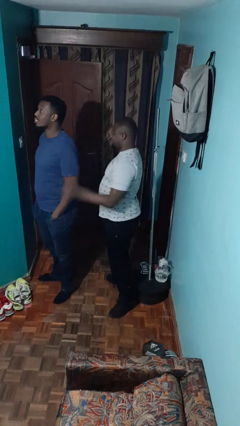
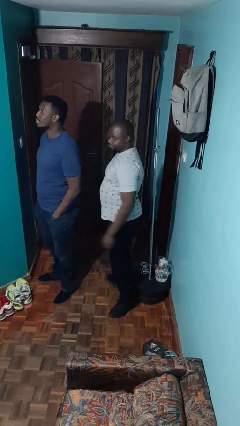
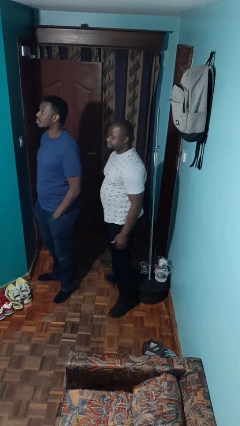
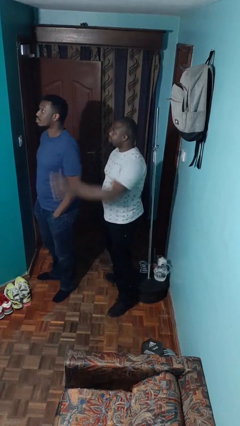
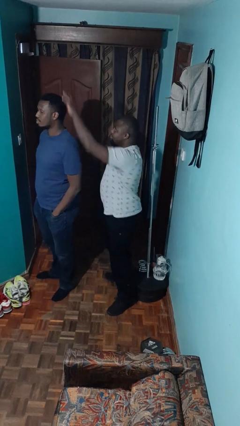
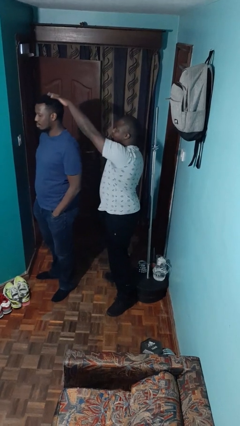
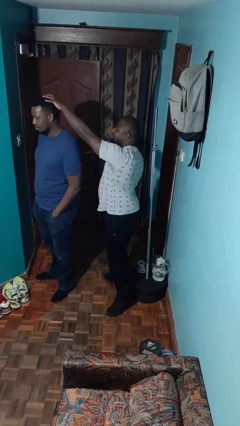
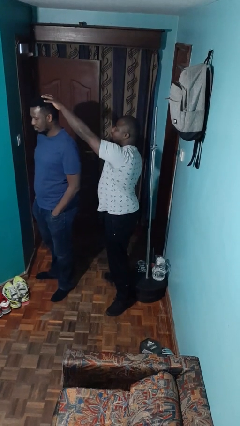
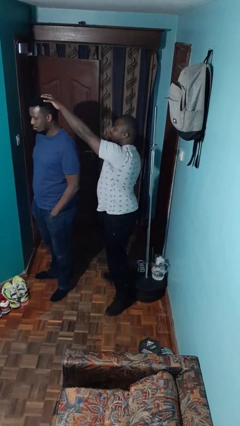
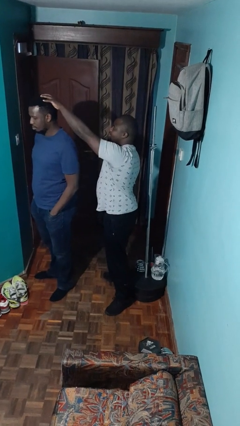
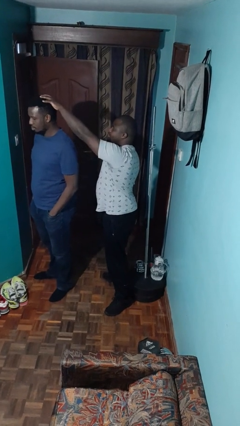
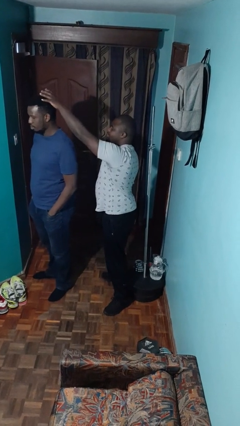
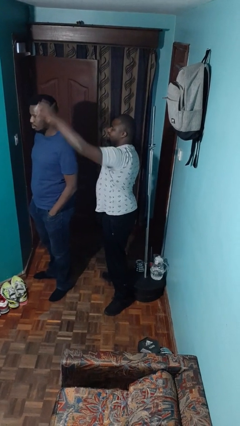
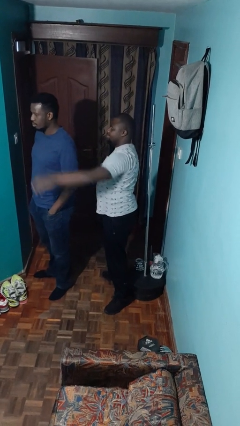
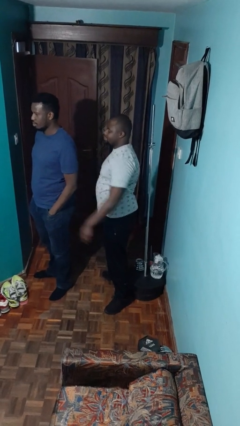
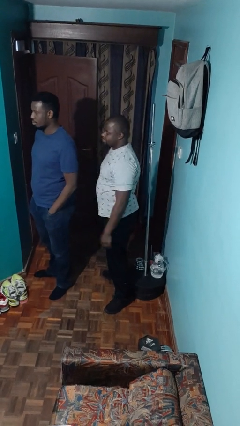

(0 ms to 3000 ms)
person grabs person by hair

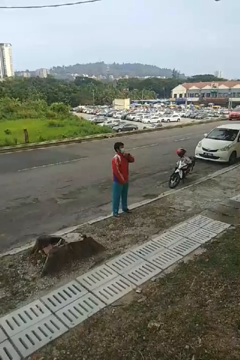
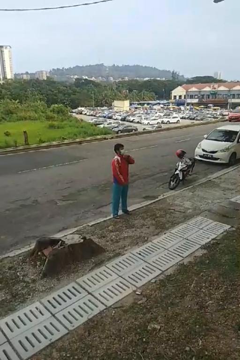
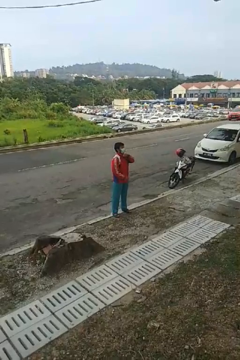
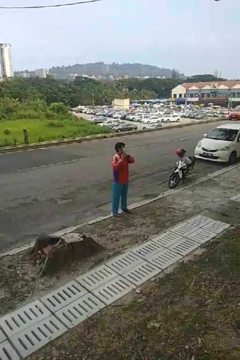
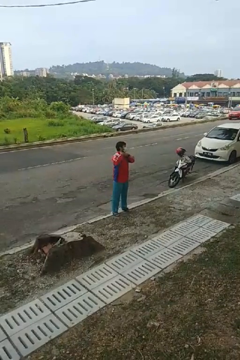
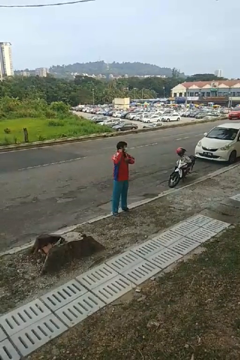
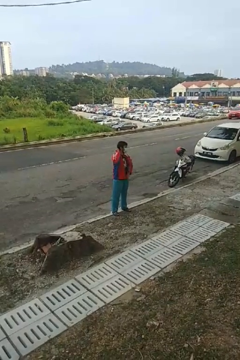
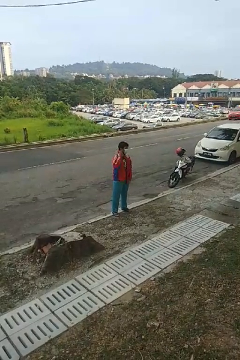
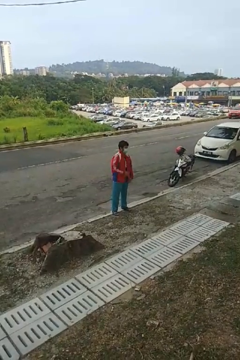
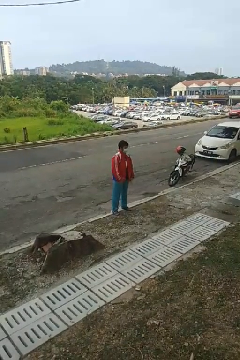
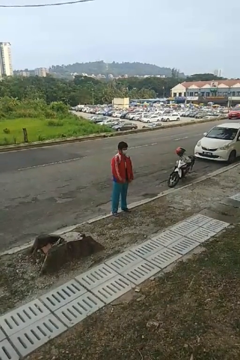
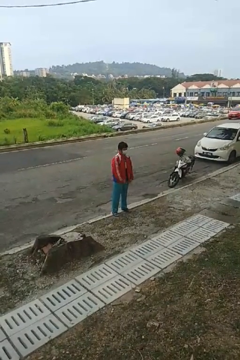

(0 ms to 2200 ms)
person unzips jacket

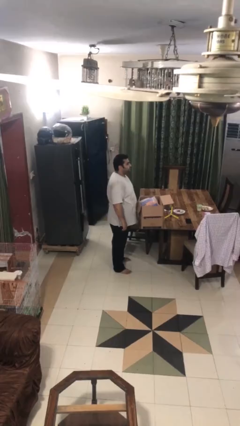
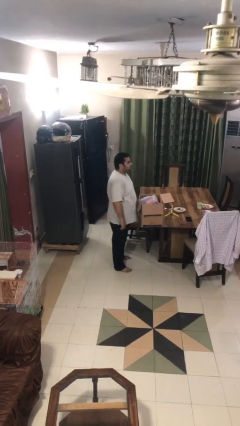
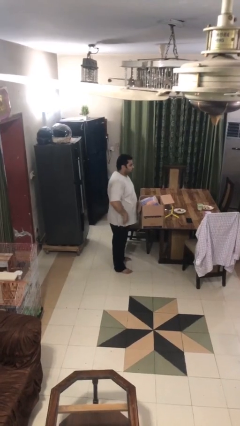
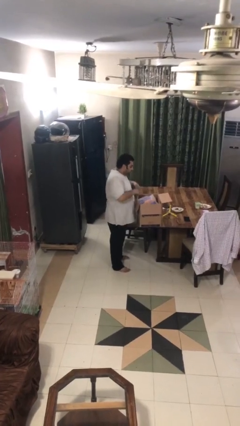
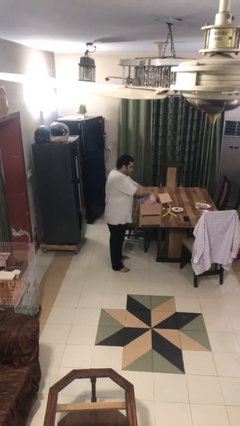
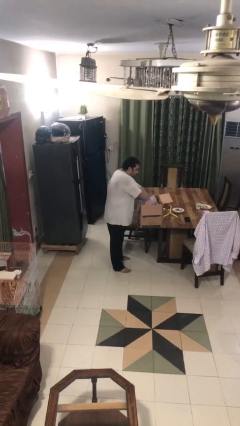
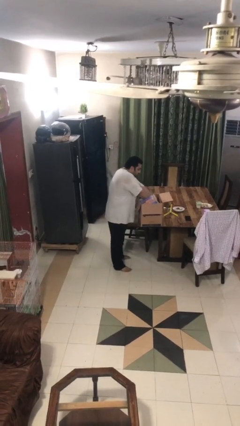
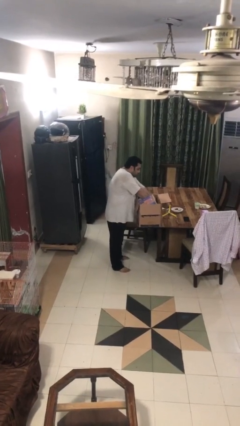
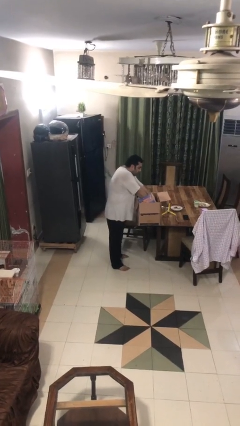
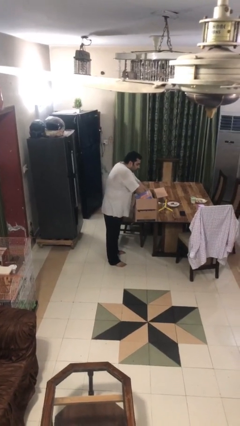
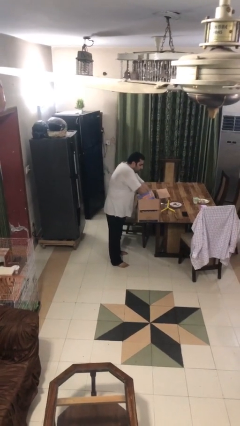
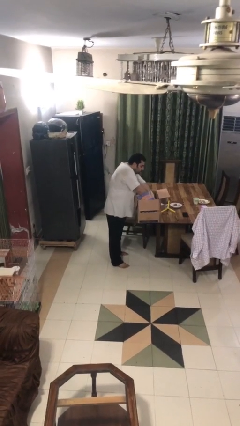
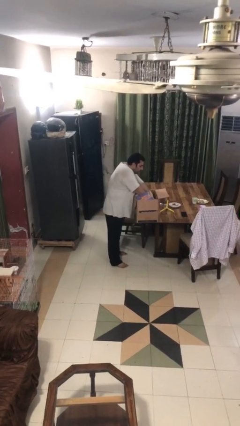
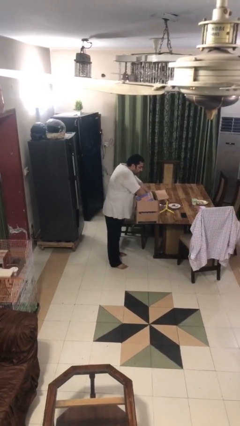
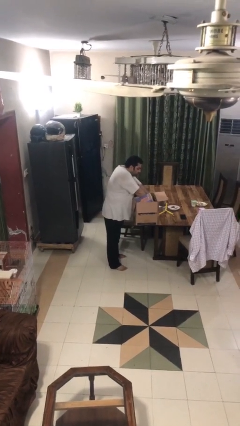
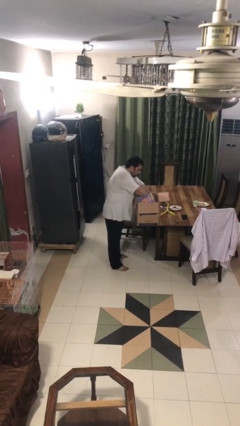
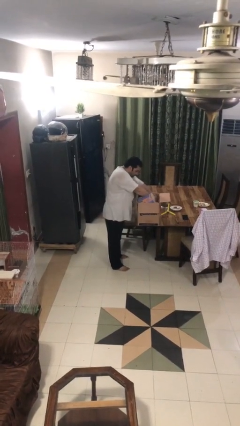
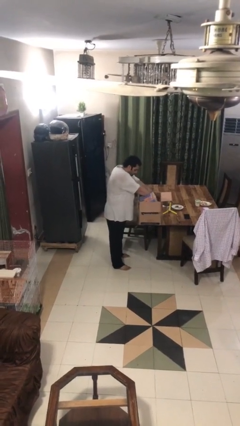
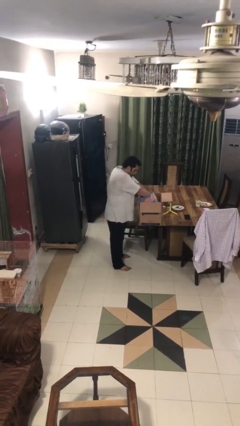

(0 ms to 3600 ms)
person searches in box

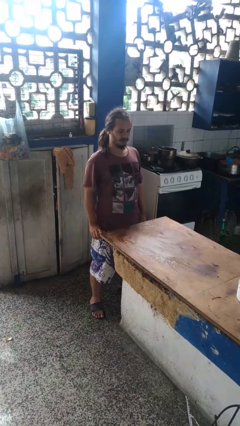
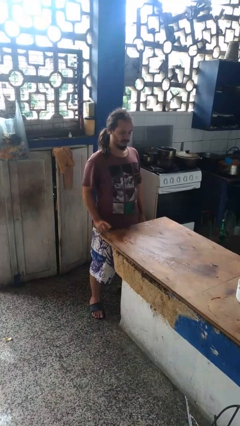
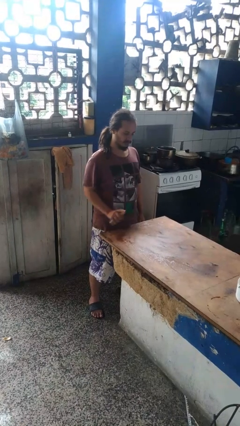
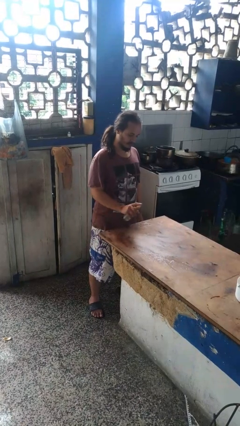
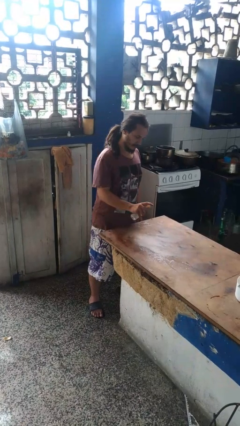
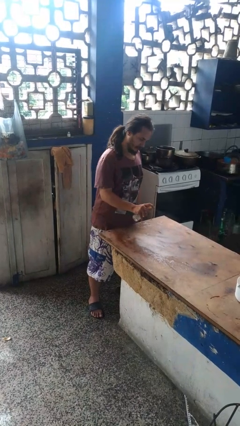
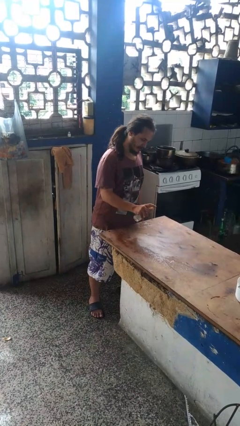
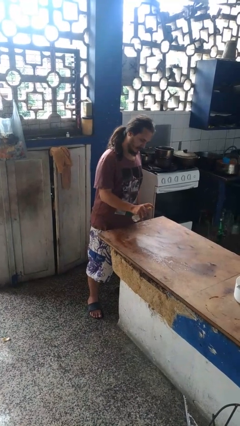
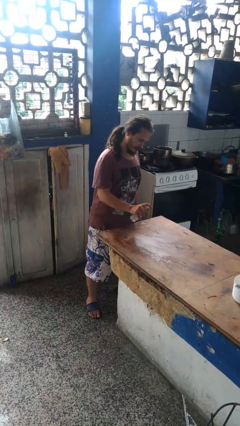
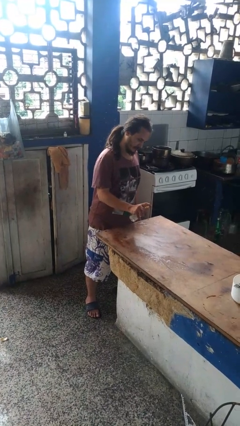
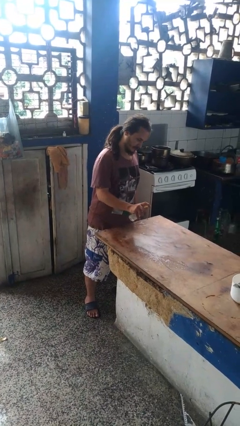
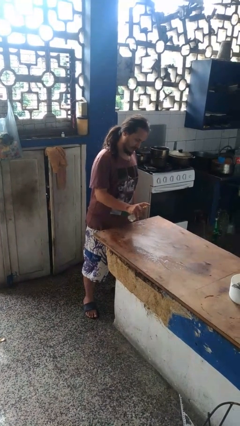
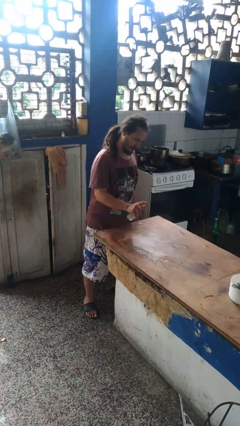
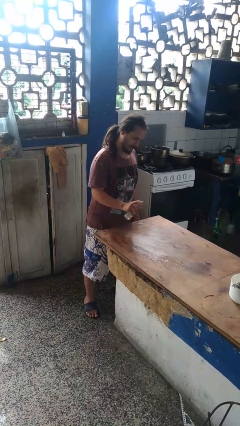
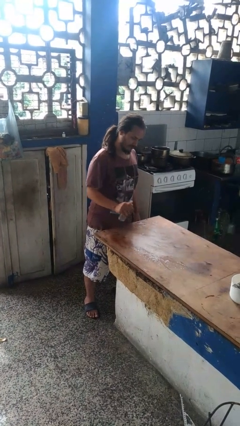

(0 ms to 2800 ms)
person sprays from bottle

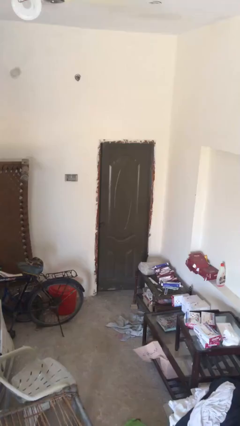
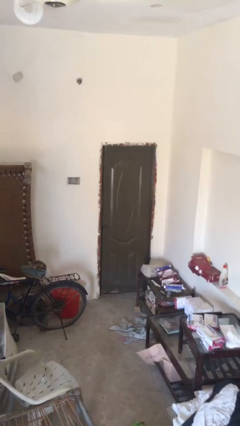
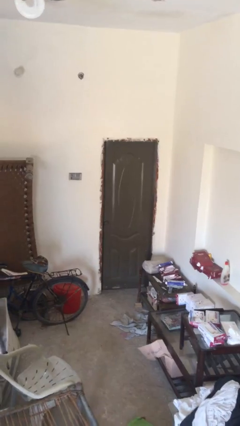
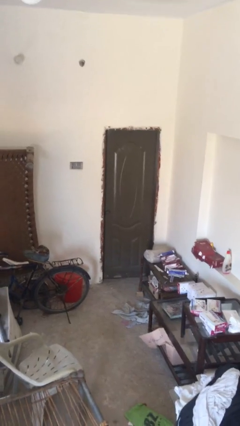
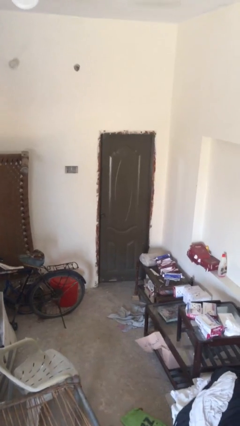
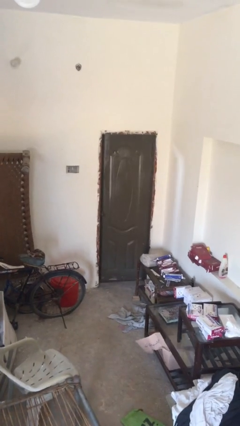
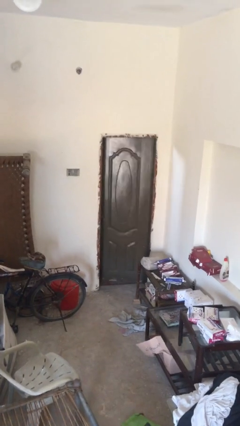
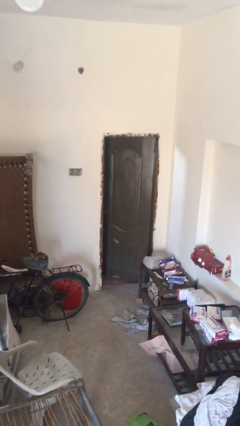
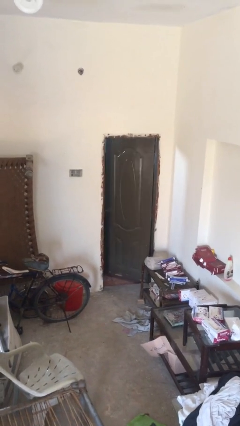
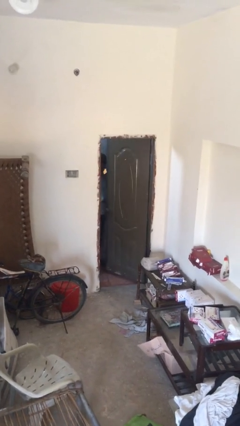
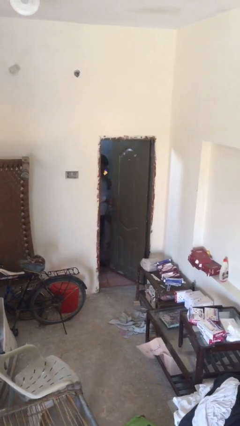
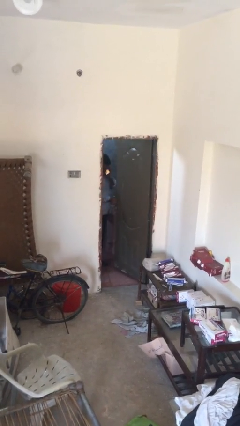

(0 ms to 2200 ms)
person opens facility door

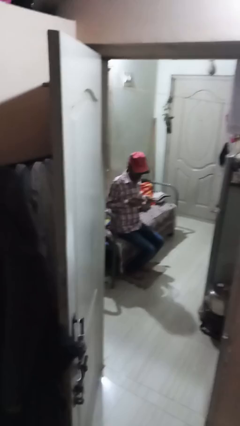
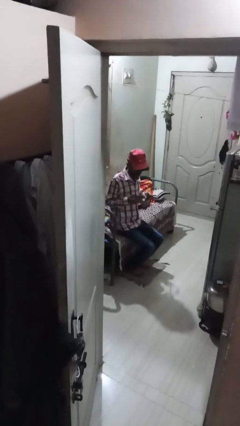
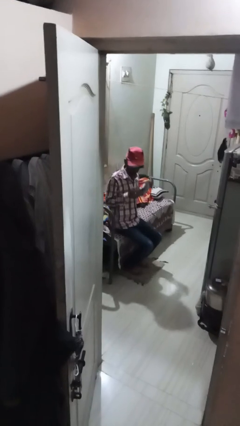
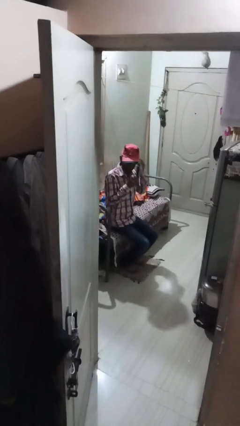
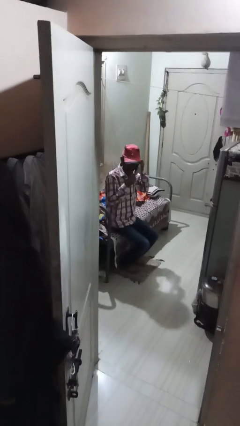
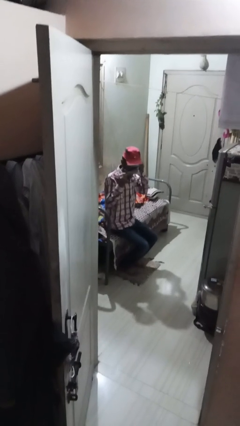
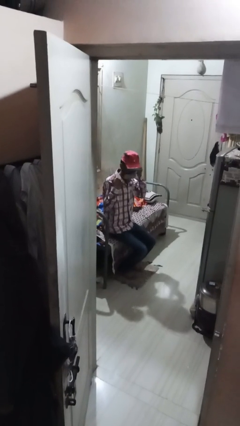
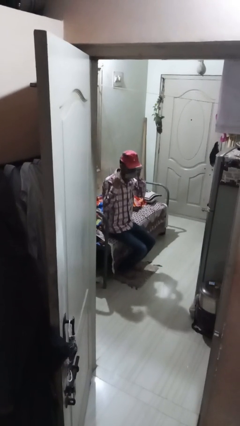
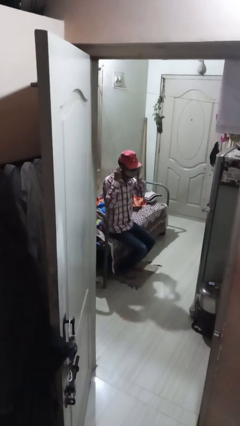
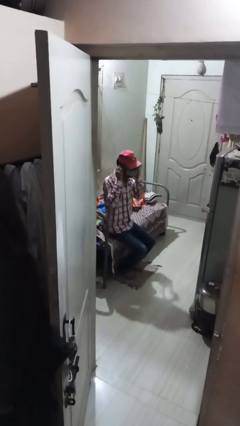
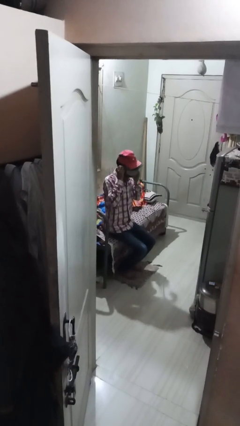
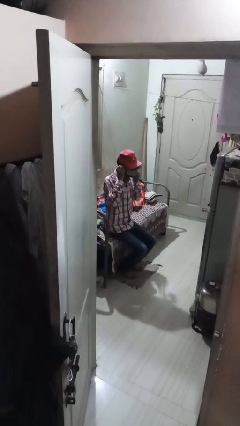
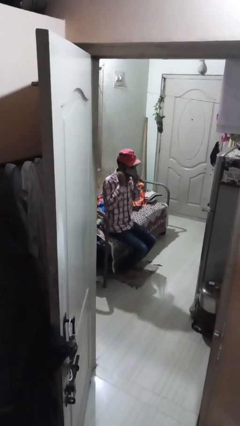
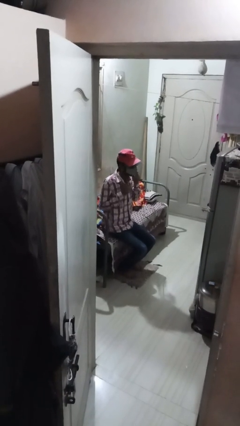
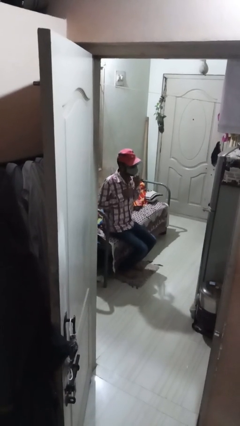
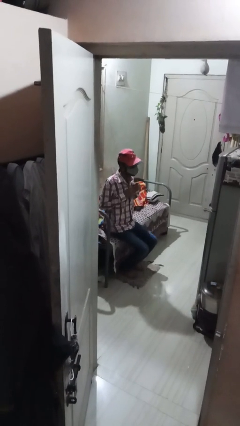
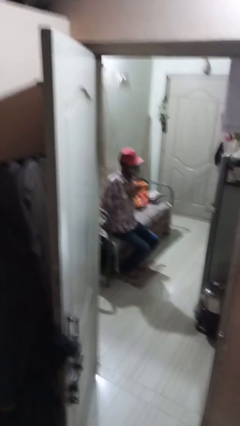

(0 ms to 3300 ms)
person puts on facemask

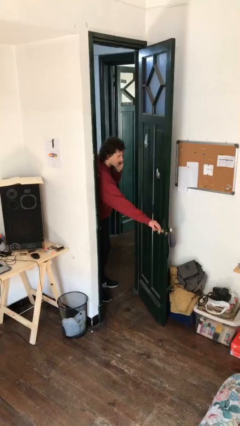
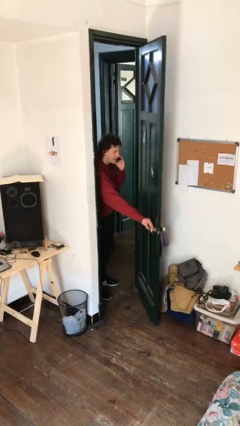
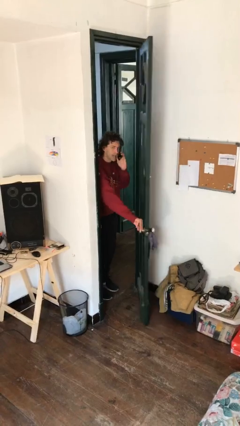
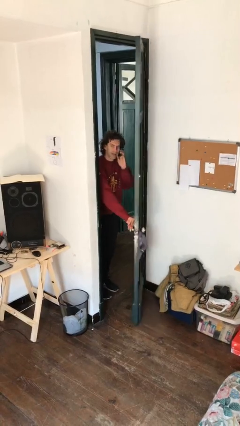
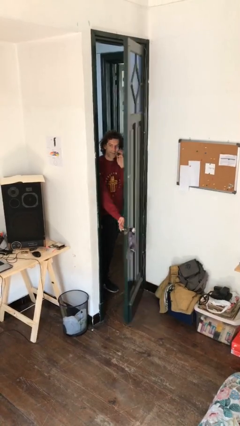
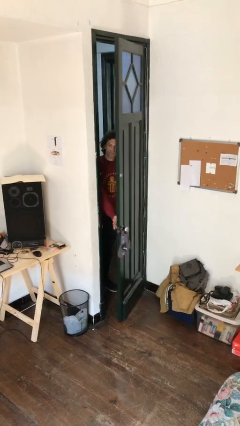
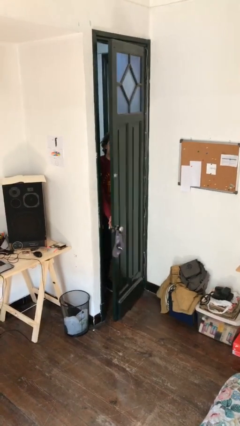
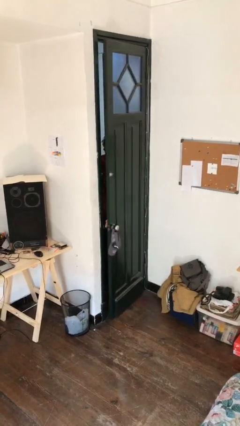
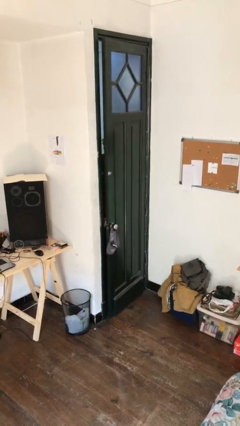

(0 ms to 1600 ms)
person closes facility door
